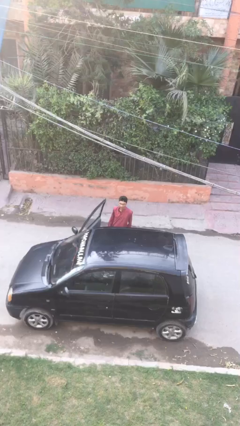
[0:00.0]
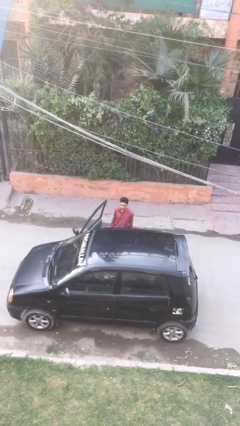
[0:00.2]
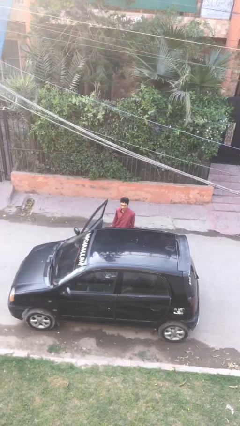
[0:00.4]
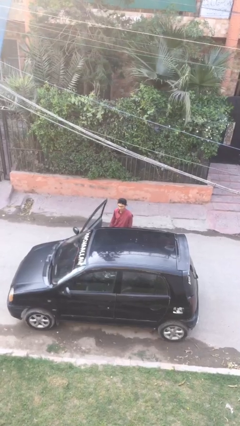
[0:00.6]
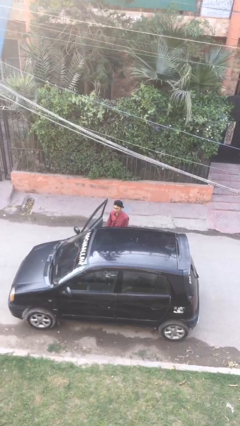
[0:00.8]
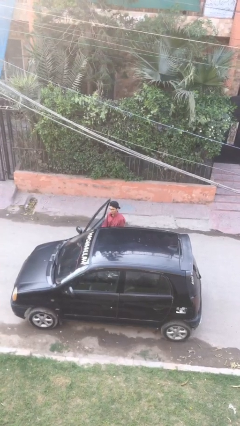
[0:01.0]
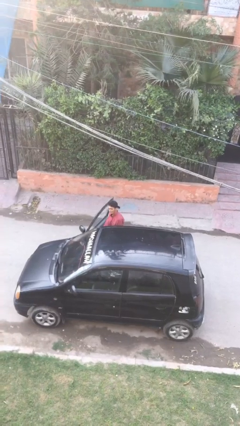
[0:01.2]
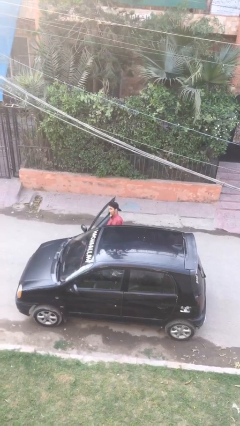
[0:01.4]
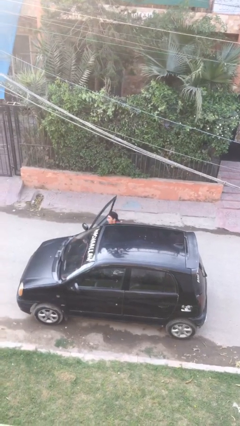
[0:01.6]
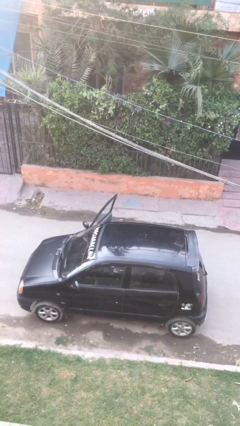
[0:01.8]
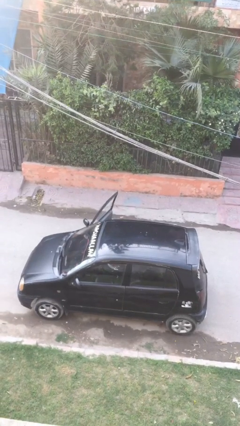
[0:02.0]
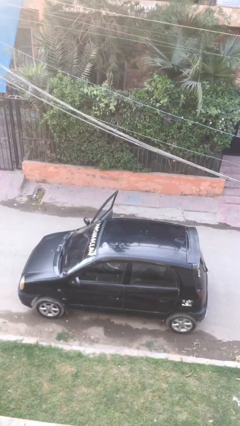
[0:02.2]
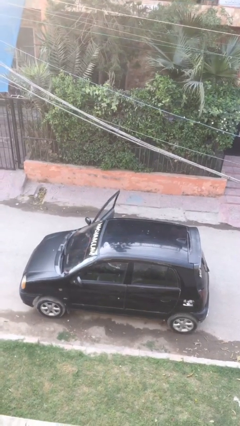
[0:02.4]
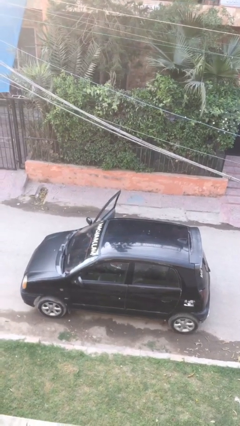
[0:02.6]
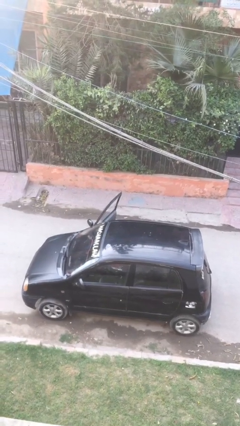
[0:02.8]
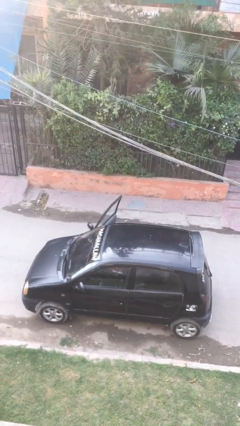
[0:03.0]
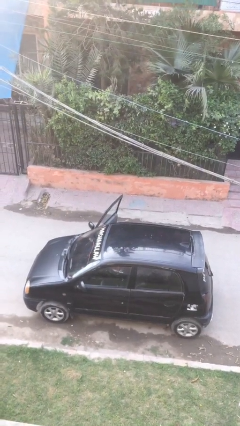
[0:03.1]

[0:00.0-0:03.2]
person enters car

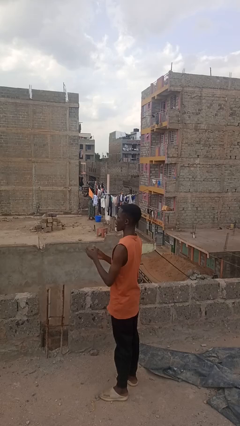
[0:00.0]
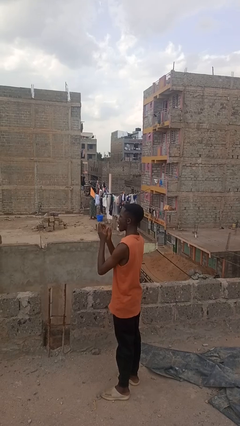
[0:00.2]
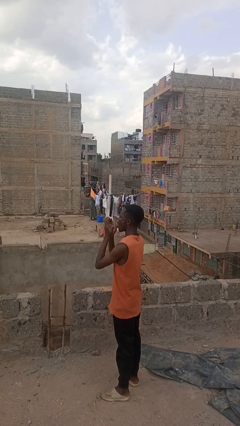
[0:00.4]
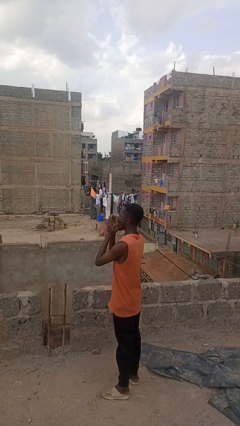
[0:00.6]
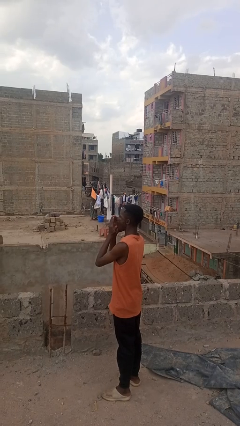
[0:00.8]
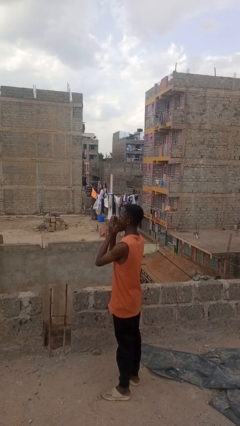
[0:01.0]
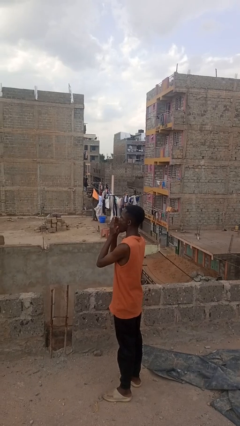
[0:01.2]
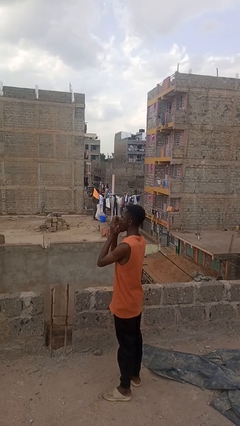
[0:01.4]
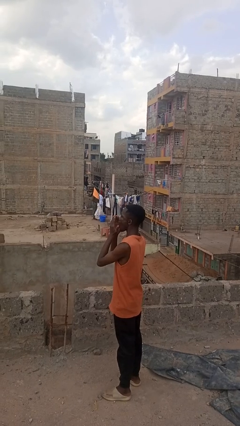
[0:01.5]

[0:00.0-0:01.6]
person blows into hands

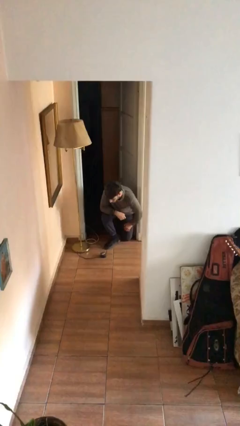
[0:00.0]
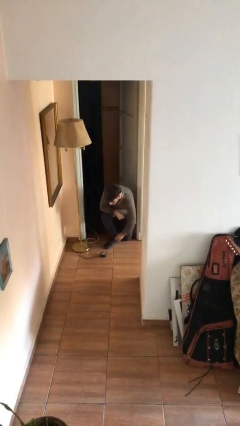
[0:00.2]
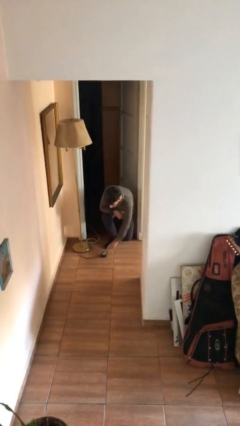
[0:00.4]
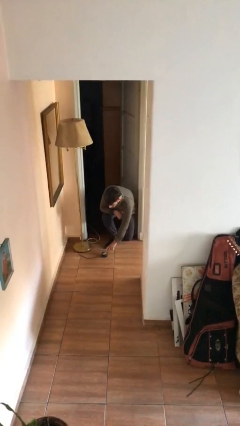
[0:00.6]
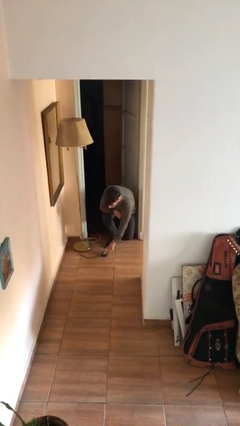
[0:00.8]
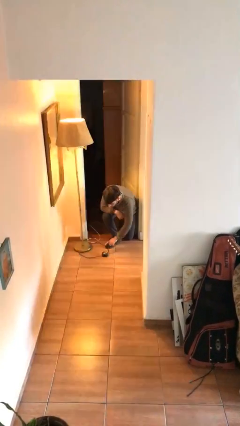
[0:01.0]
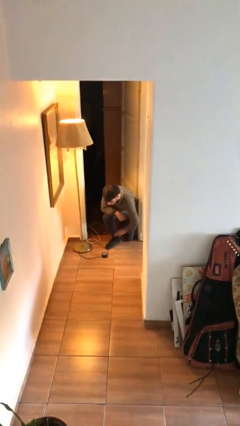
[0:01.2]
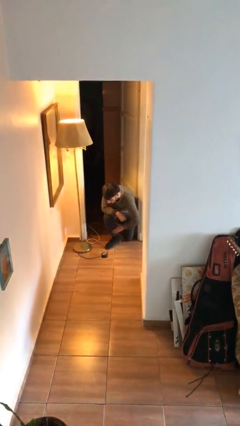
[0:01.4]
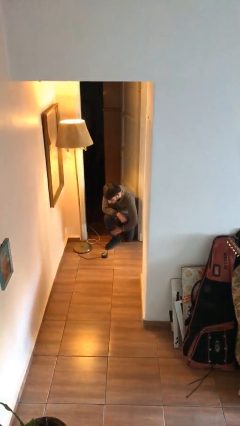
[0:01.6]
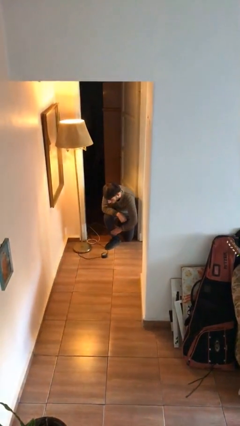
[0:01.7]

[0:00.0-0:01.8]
person turns on lamp

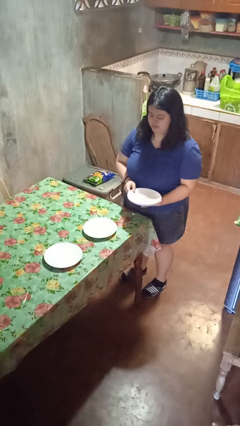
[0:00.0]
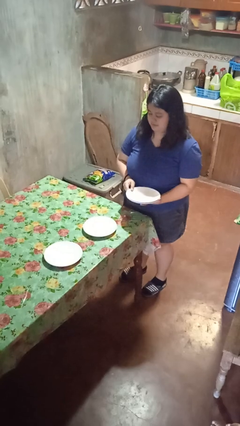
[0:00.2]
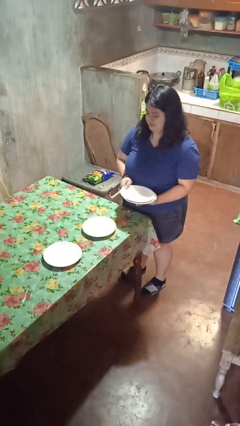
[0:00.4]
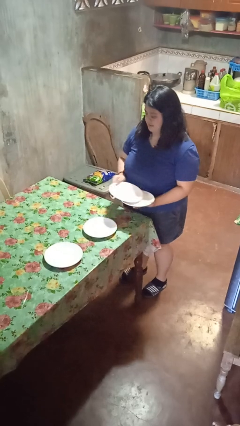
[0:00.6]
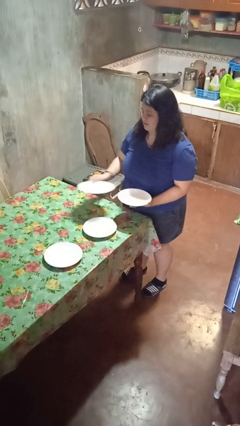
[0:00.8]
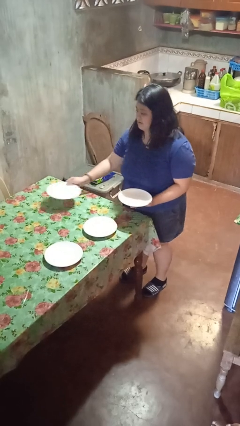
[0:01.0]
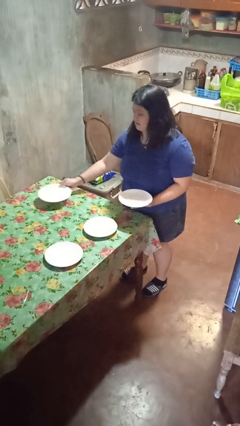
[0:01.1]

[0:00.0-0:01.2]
person sets table

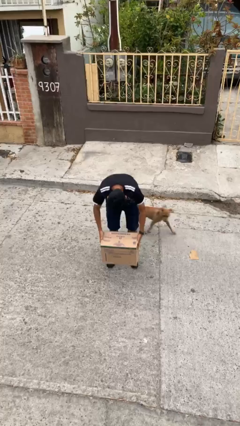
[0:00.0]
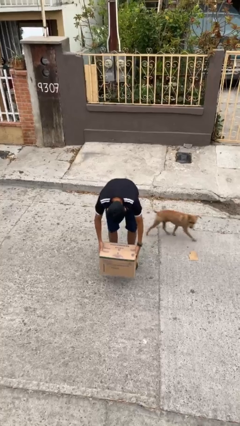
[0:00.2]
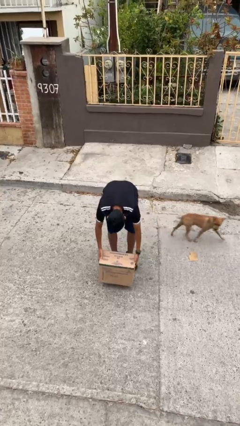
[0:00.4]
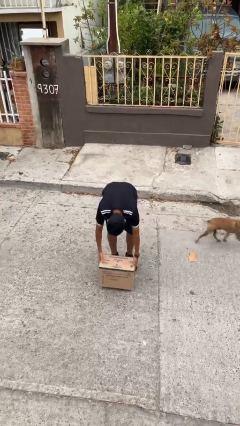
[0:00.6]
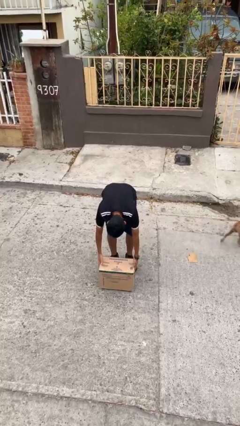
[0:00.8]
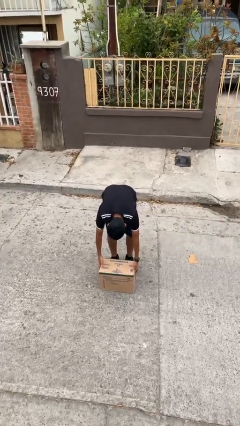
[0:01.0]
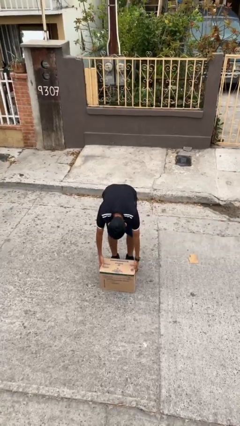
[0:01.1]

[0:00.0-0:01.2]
person puts down object on floor

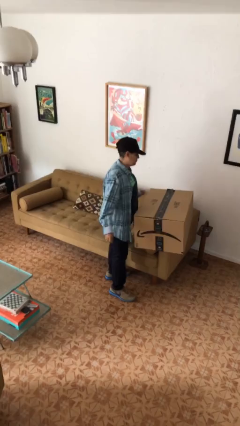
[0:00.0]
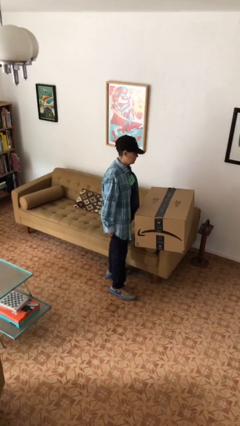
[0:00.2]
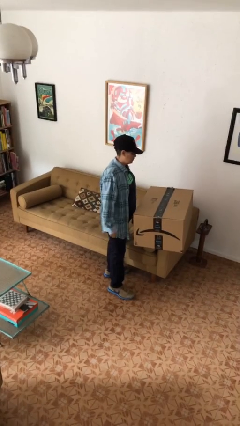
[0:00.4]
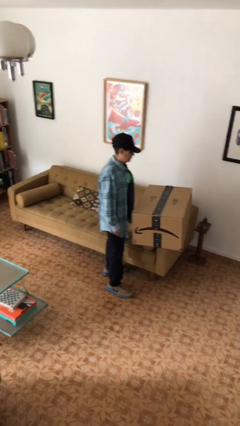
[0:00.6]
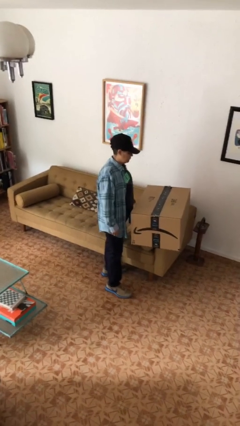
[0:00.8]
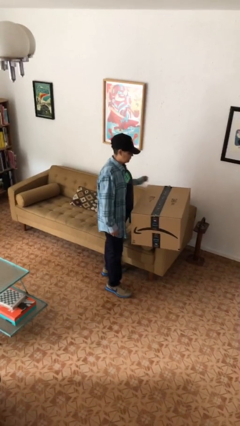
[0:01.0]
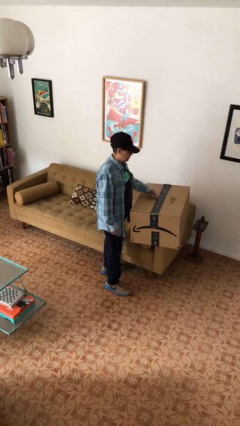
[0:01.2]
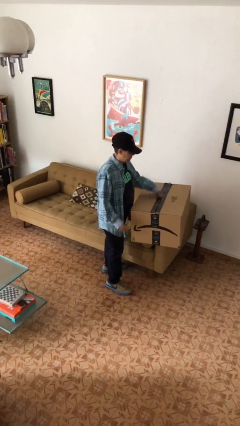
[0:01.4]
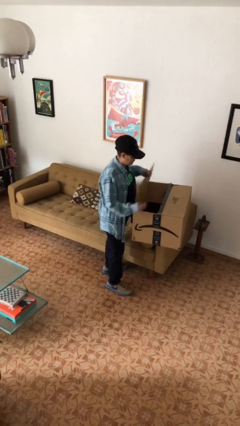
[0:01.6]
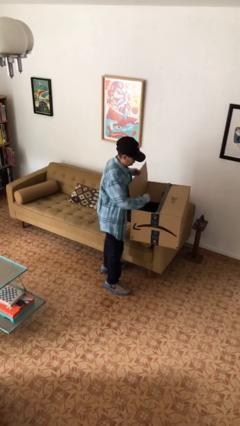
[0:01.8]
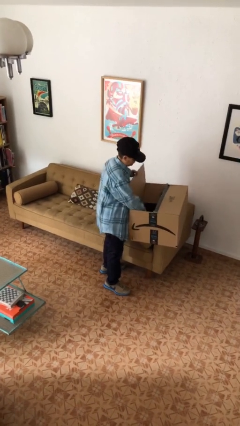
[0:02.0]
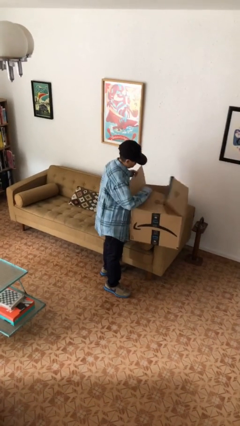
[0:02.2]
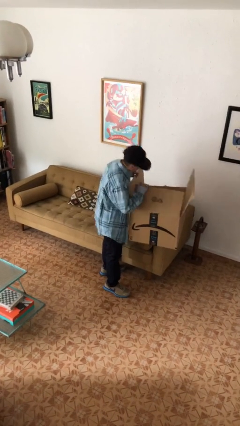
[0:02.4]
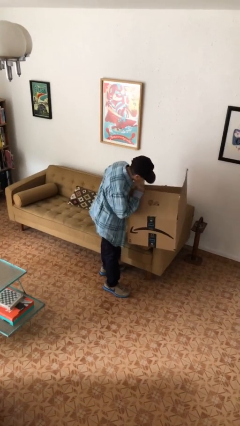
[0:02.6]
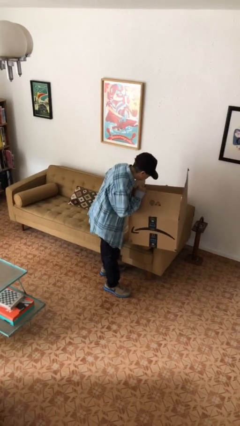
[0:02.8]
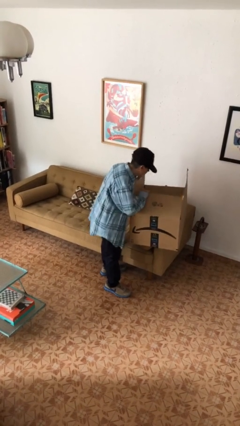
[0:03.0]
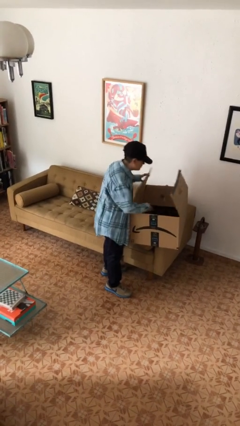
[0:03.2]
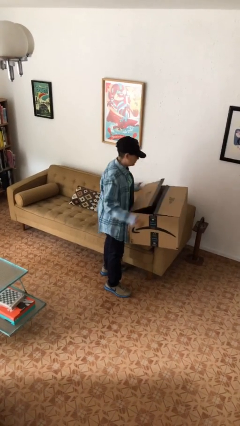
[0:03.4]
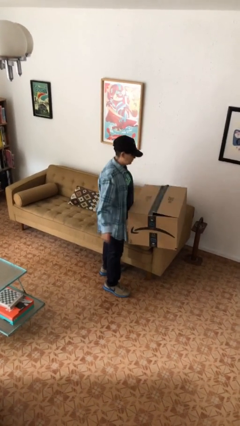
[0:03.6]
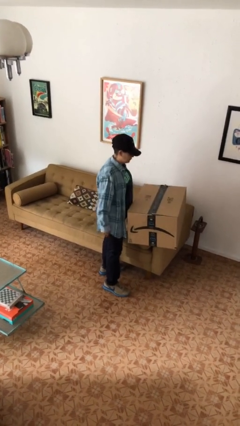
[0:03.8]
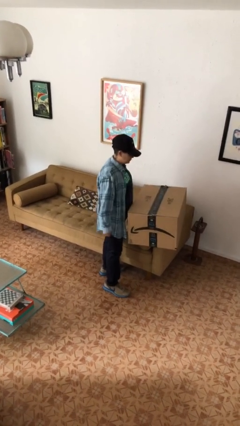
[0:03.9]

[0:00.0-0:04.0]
person searches in box

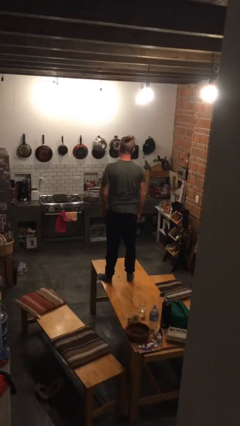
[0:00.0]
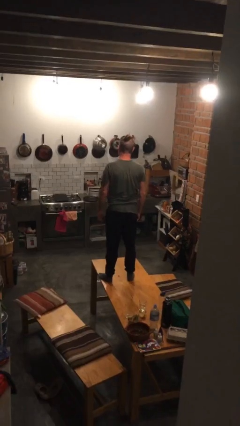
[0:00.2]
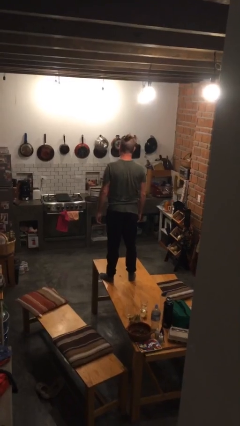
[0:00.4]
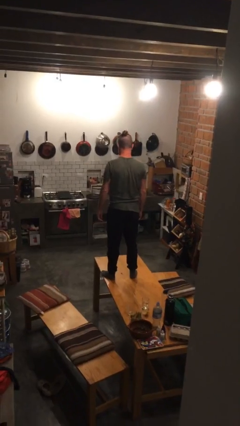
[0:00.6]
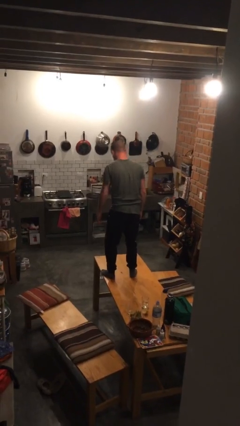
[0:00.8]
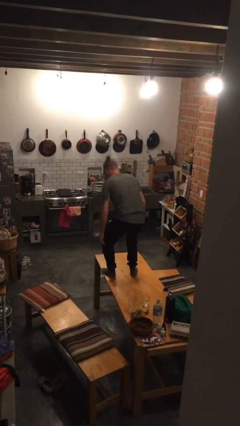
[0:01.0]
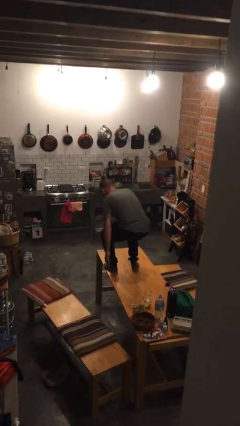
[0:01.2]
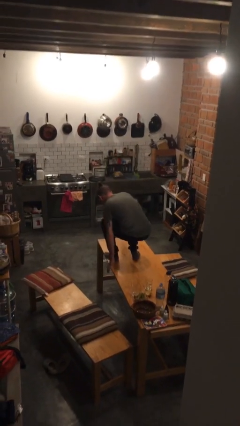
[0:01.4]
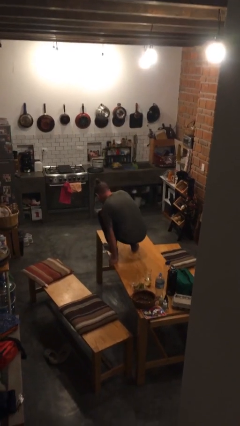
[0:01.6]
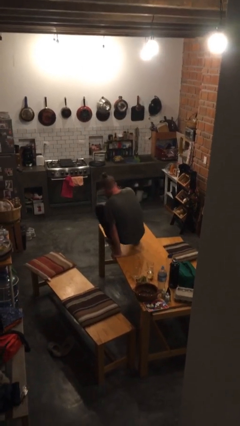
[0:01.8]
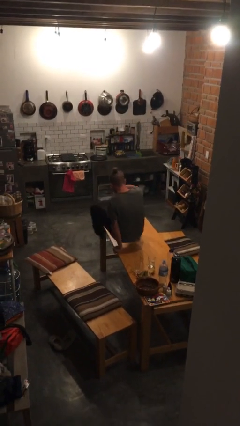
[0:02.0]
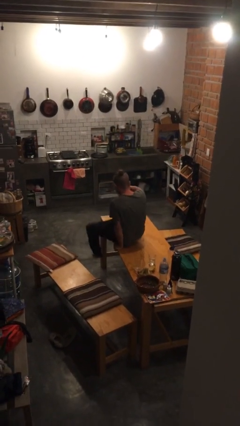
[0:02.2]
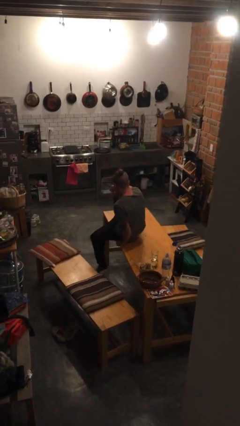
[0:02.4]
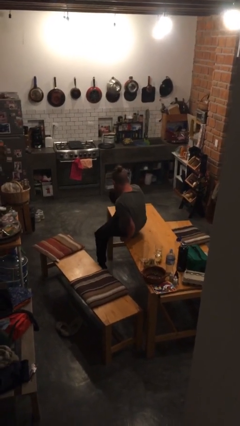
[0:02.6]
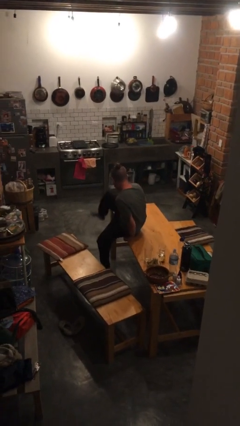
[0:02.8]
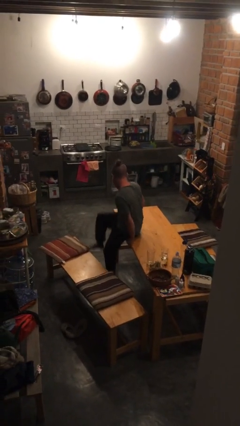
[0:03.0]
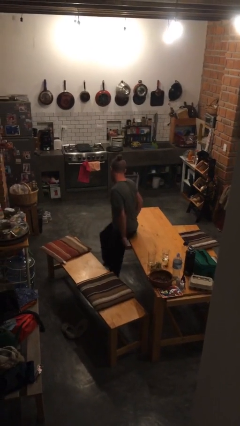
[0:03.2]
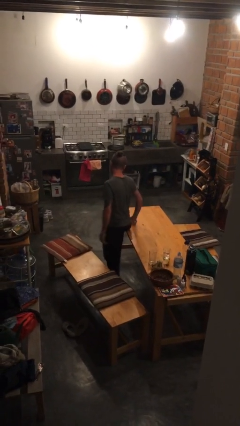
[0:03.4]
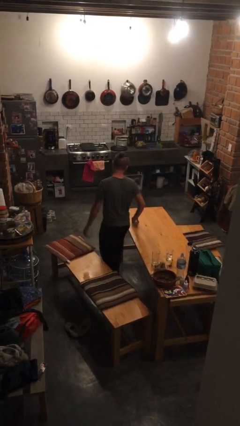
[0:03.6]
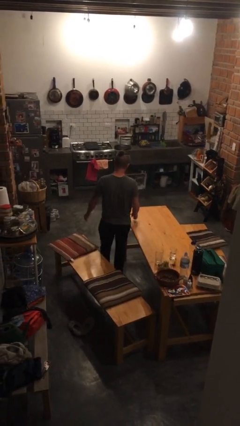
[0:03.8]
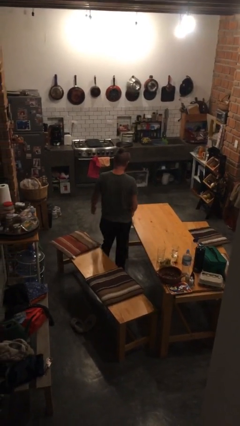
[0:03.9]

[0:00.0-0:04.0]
person climbs off table

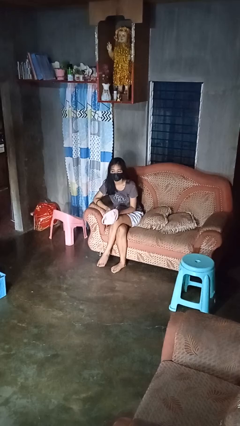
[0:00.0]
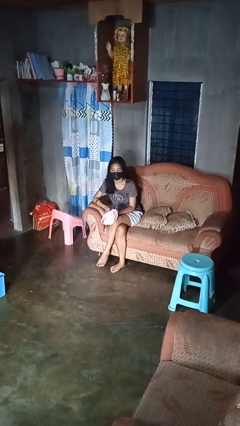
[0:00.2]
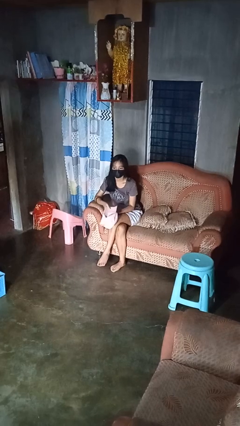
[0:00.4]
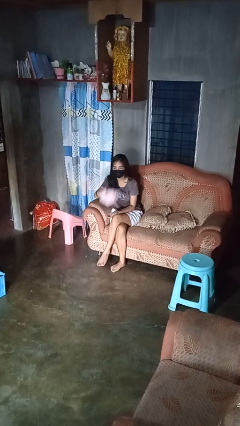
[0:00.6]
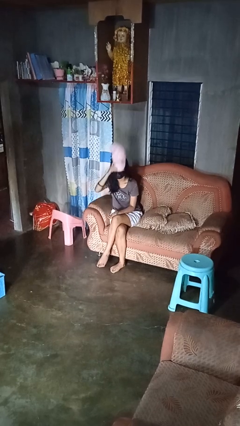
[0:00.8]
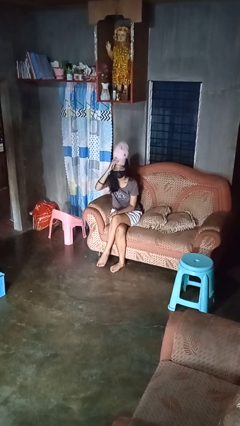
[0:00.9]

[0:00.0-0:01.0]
person puts on hat
